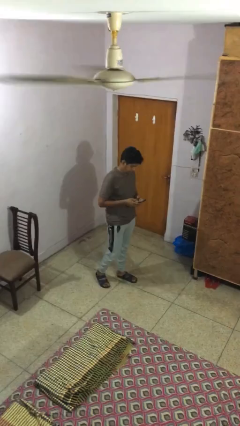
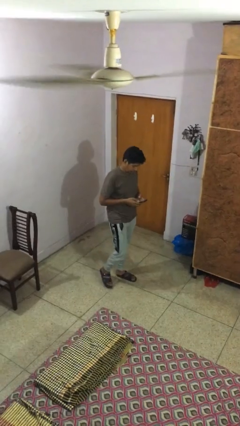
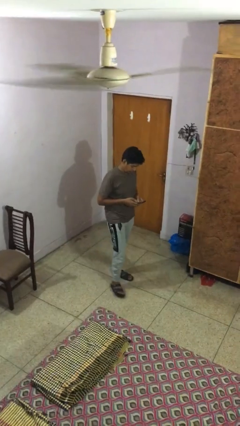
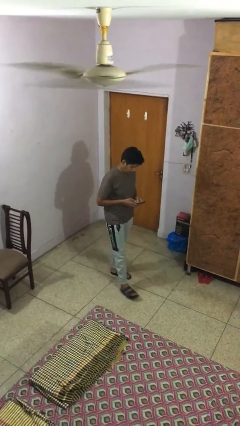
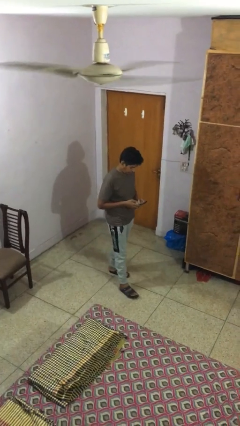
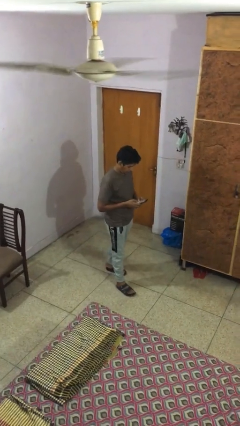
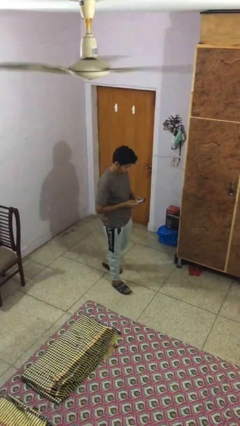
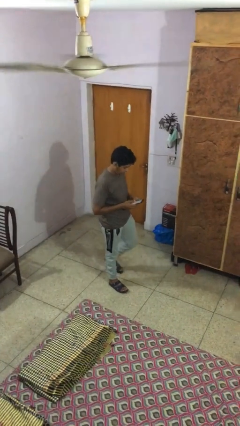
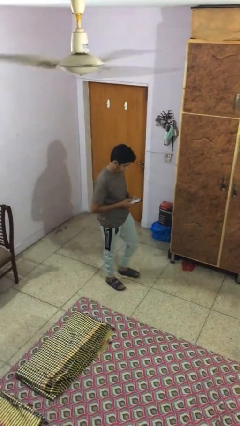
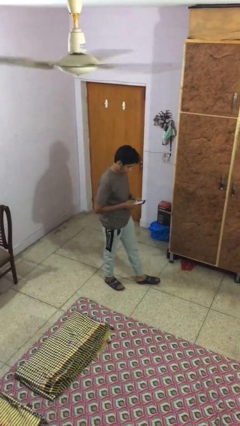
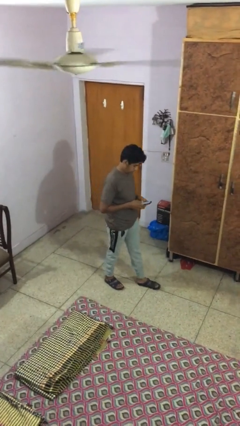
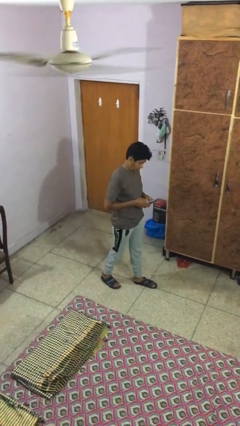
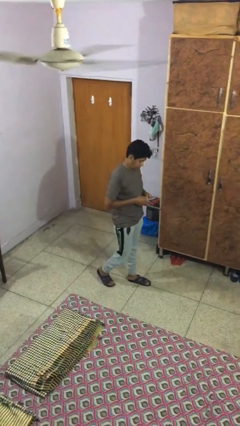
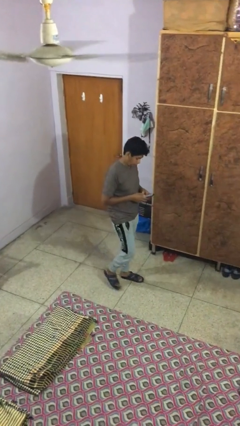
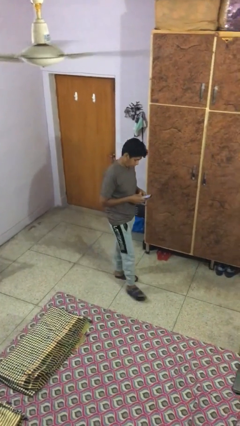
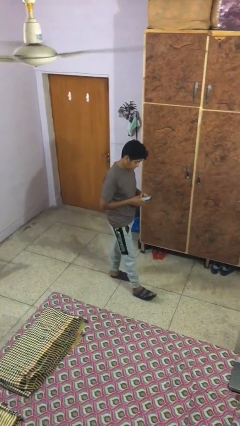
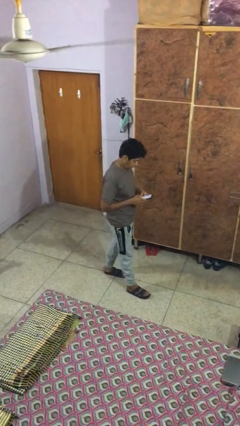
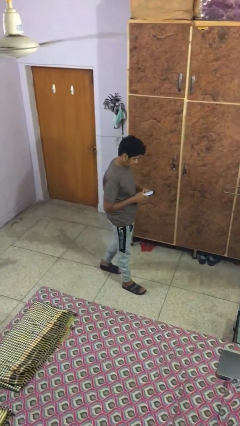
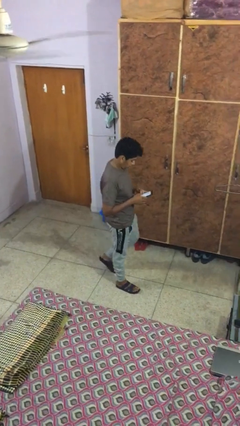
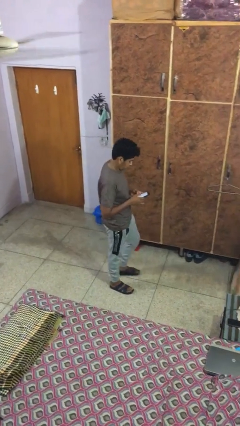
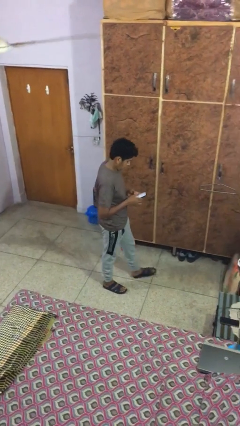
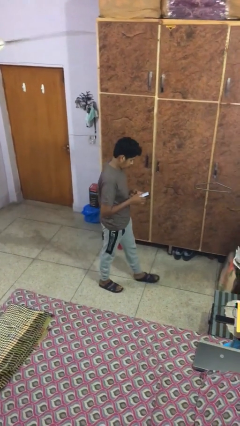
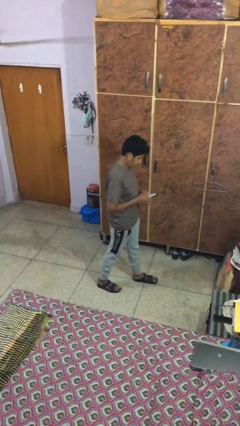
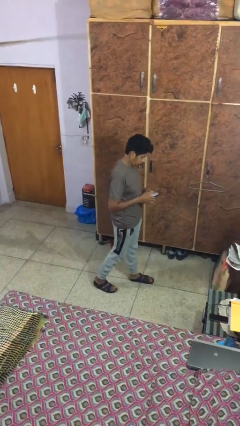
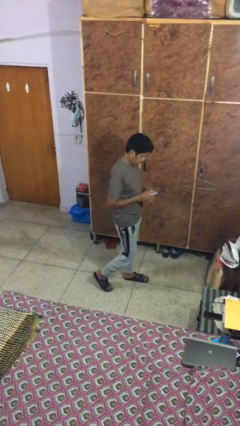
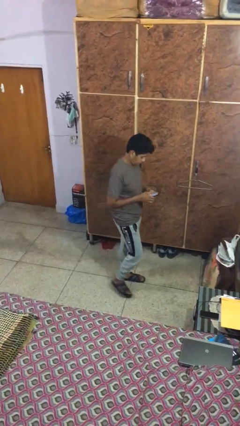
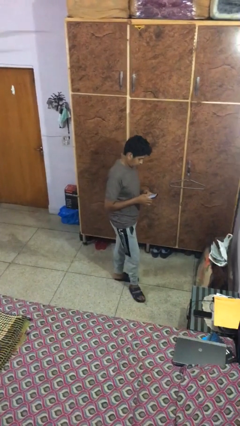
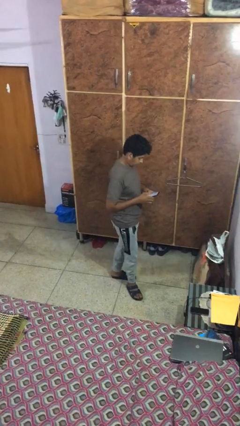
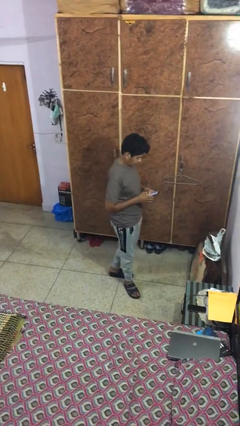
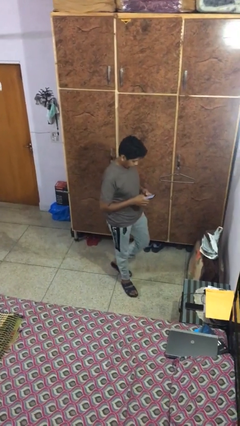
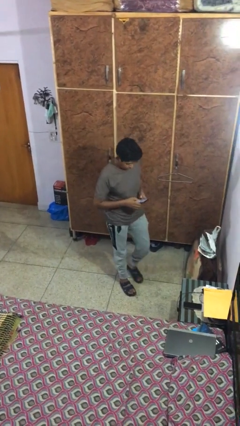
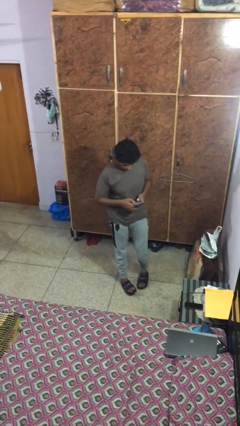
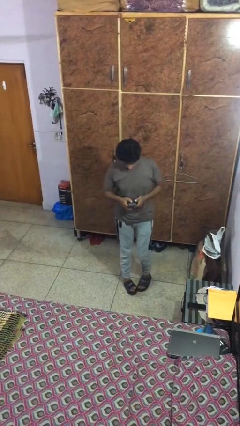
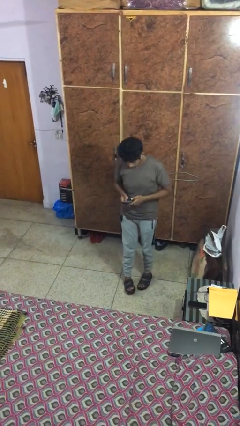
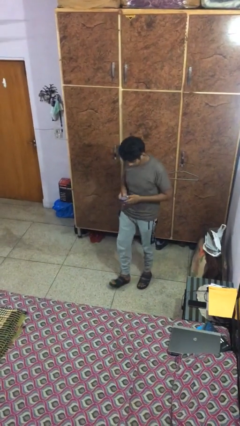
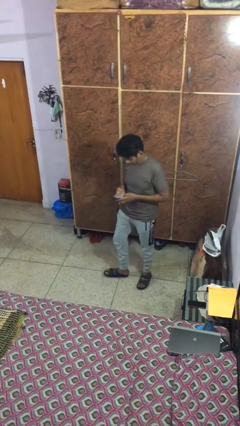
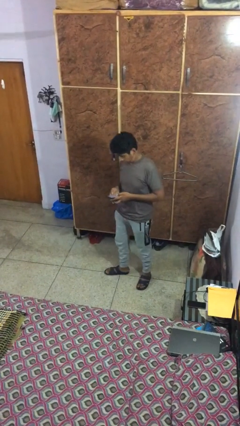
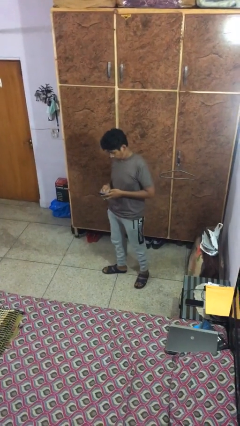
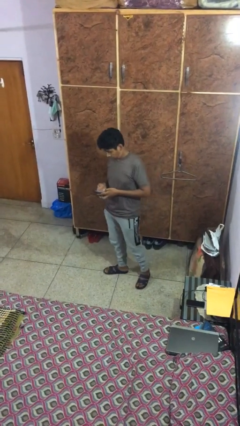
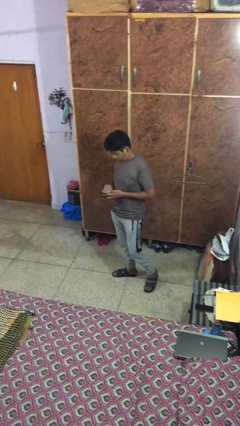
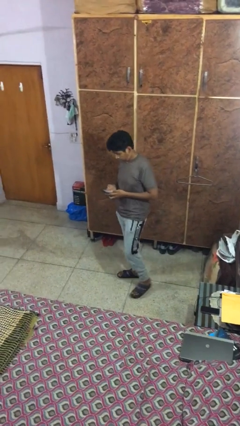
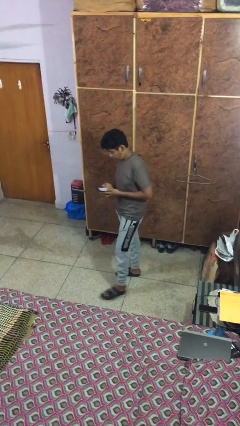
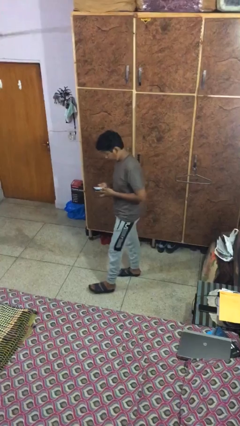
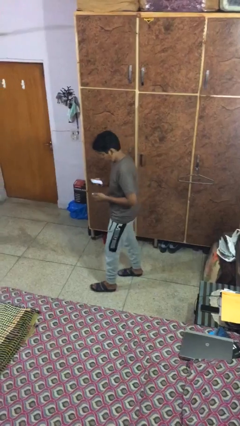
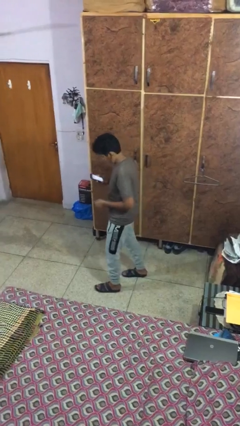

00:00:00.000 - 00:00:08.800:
person texts on phone

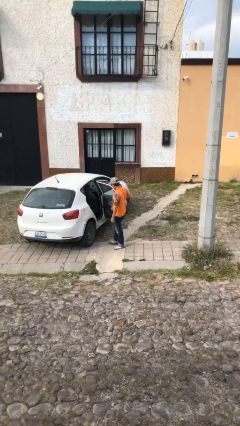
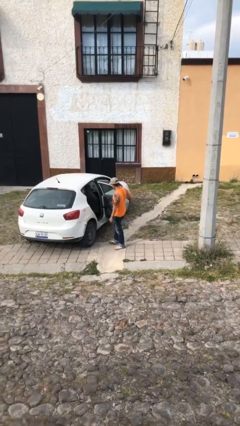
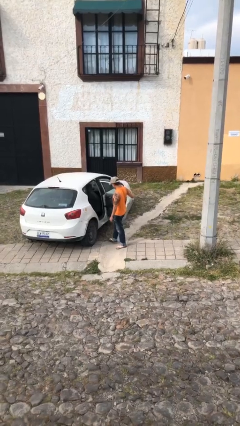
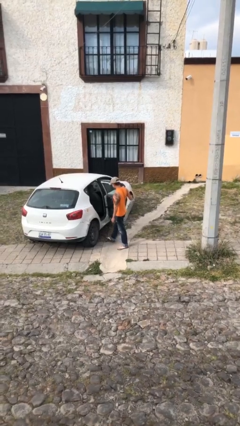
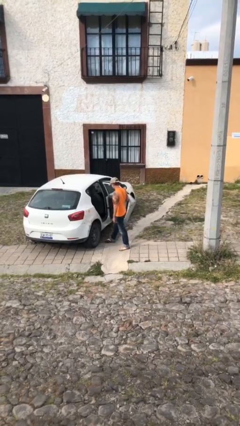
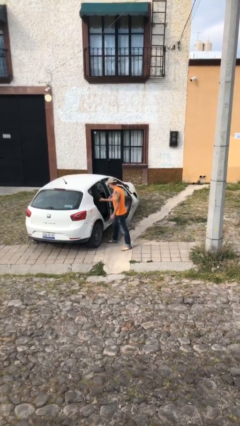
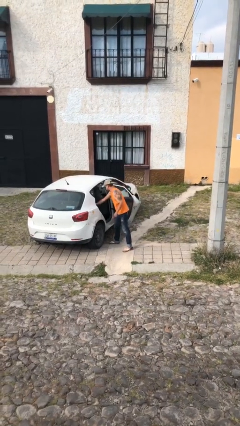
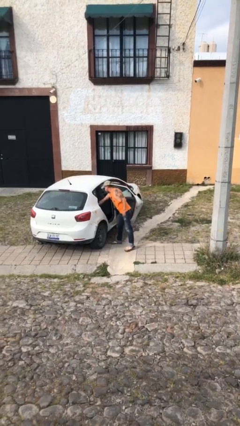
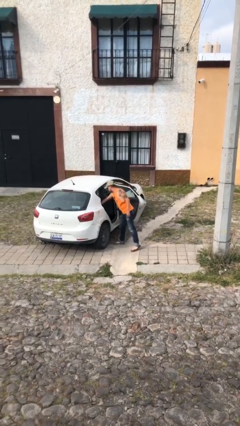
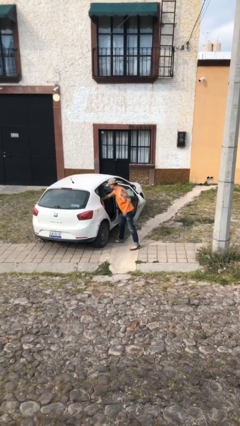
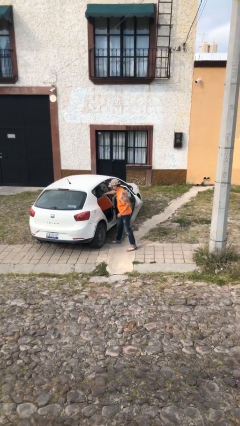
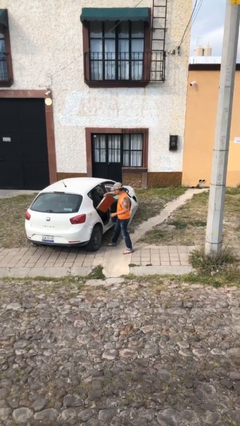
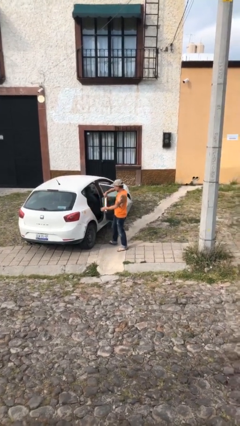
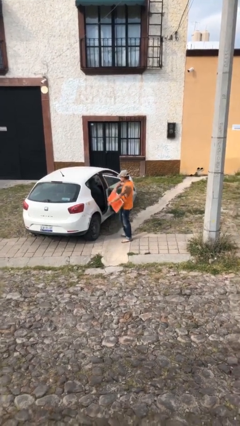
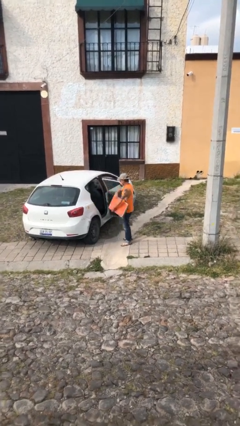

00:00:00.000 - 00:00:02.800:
person unloads car

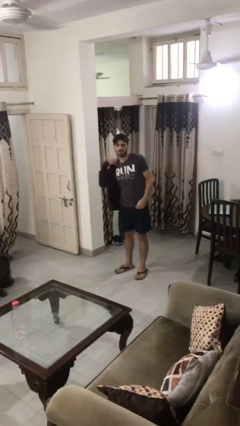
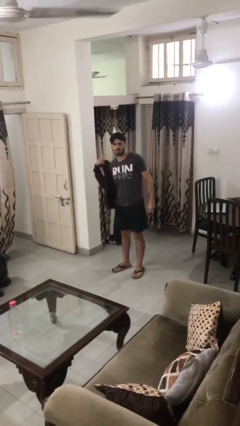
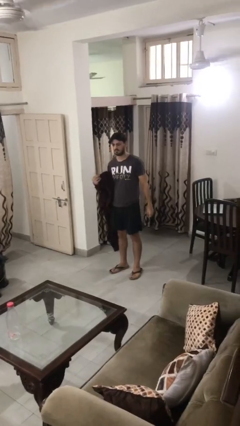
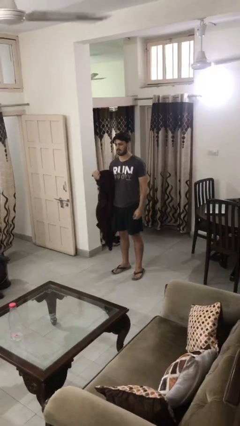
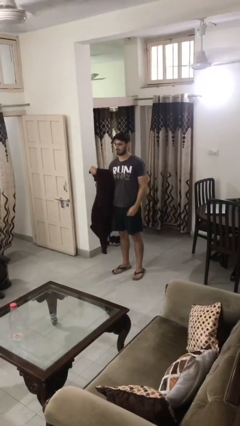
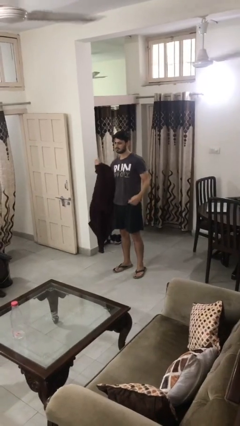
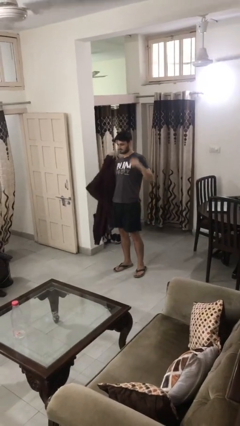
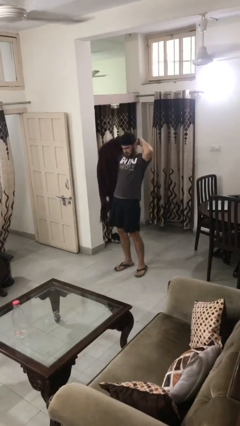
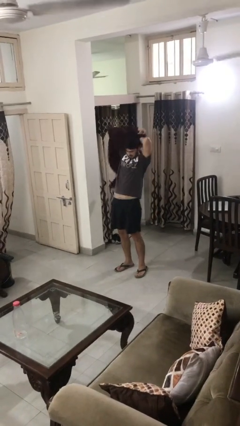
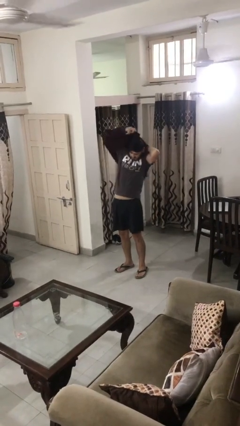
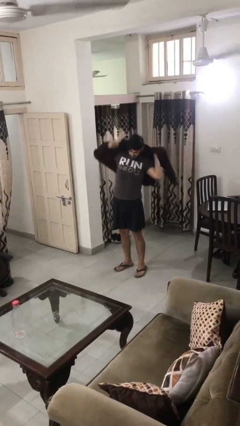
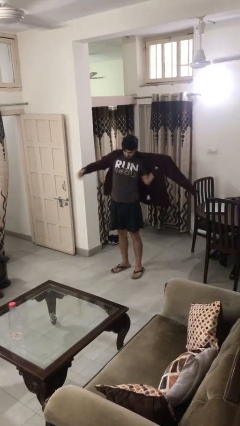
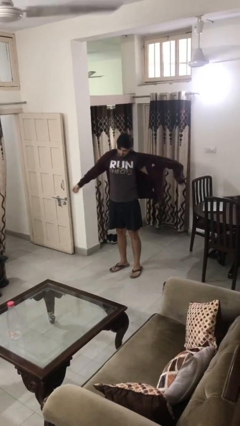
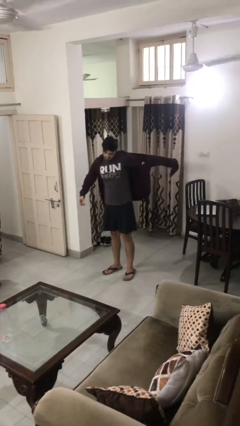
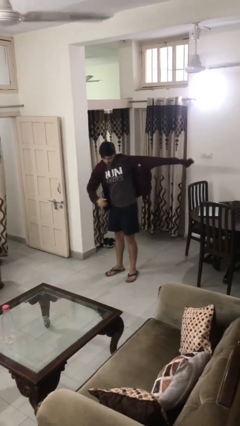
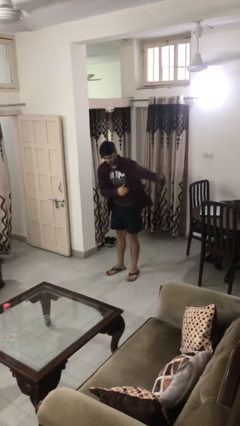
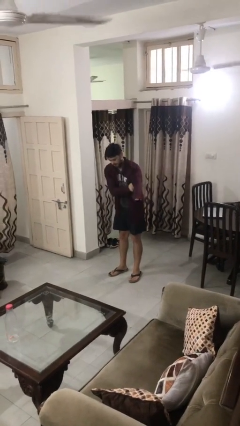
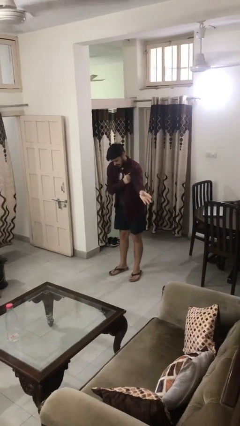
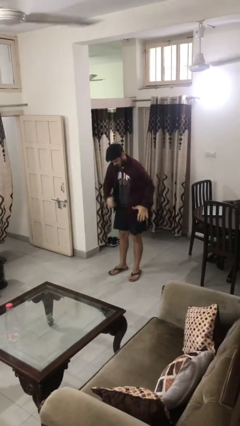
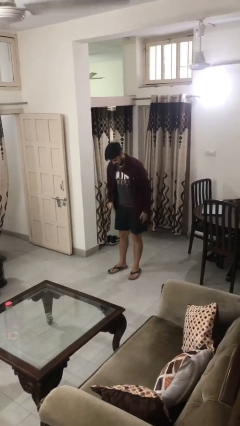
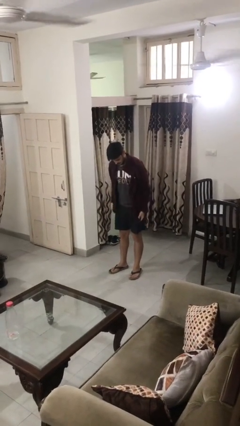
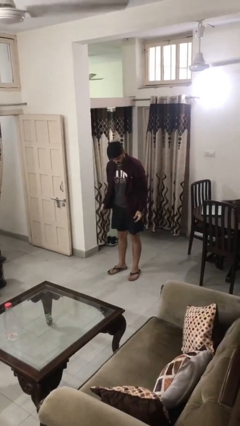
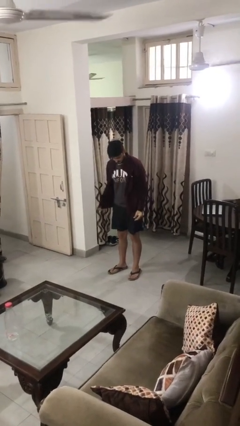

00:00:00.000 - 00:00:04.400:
person puts on jacket

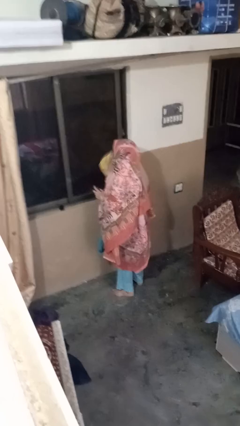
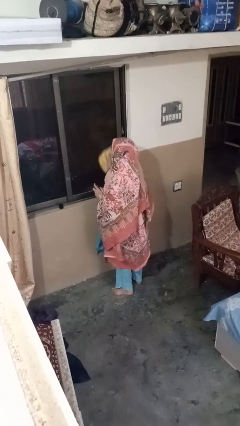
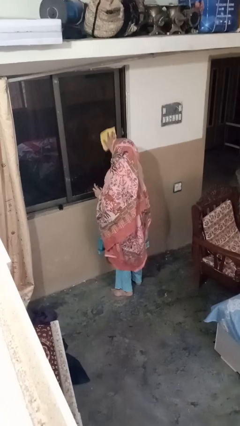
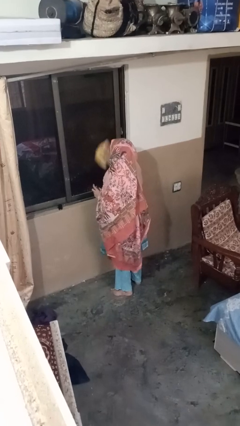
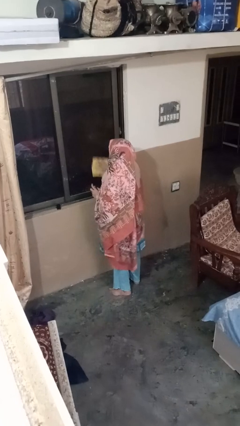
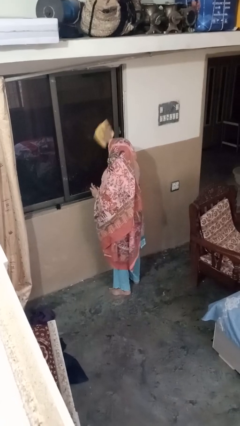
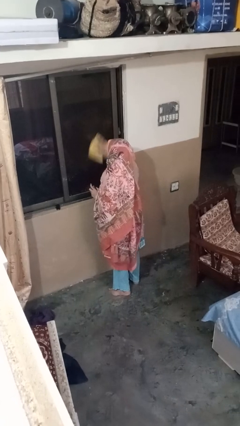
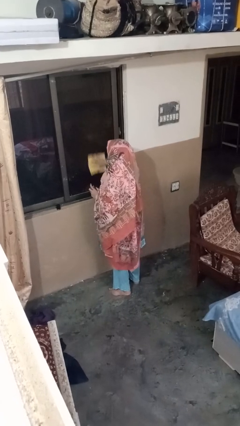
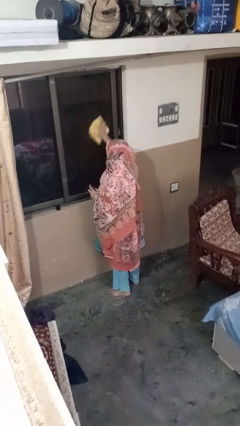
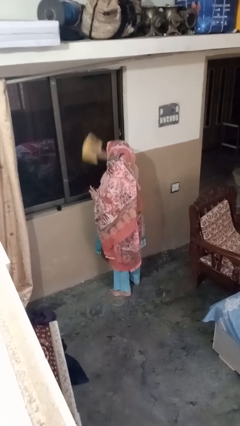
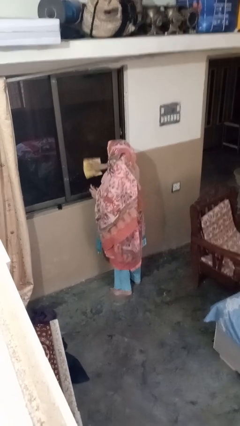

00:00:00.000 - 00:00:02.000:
person washes window
